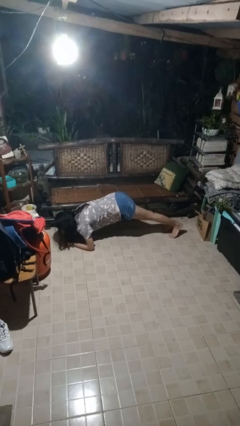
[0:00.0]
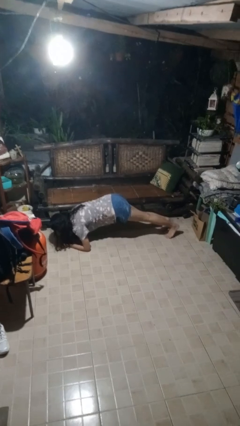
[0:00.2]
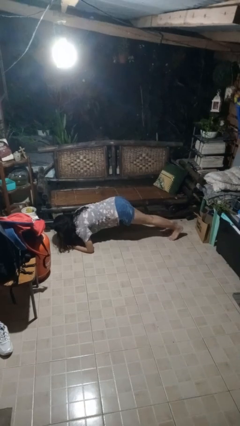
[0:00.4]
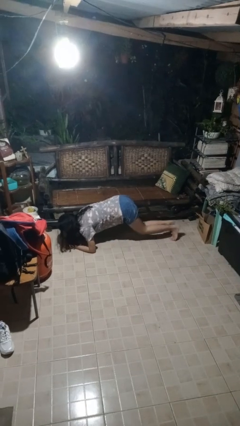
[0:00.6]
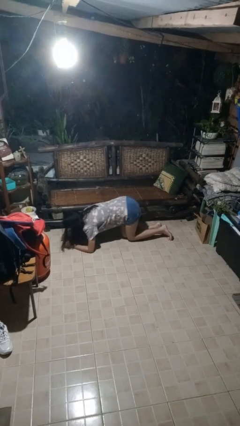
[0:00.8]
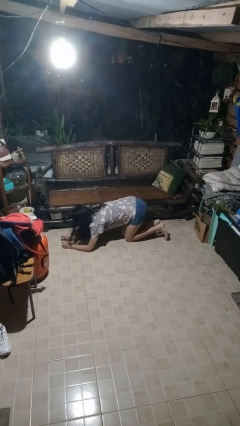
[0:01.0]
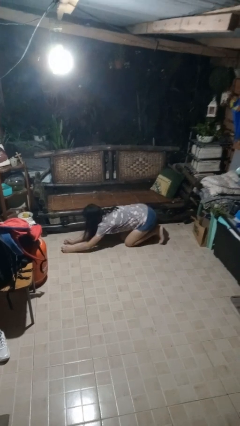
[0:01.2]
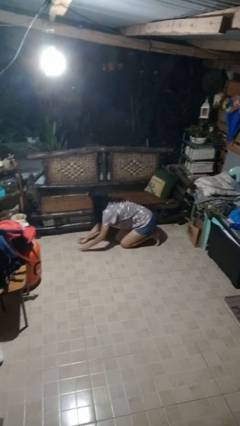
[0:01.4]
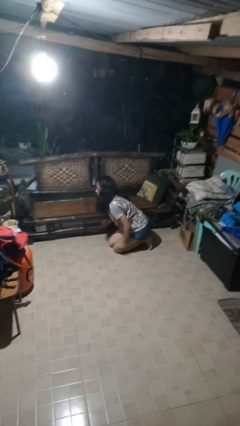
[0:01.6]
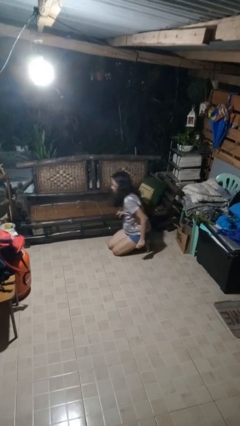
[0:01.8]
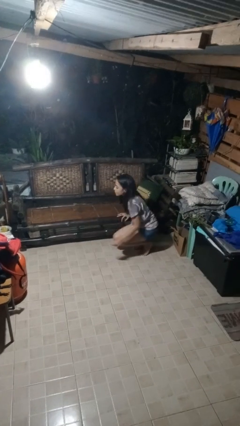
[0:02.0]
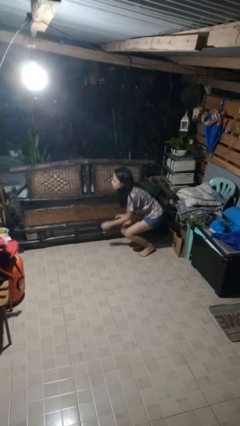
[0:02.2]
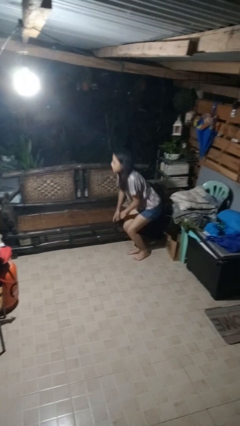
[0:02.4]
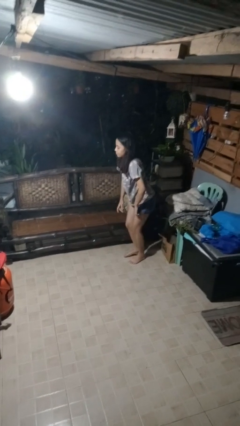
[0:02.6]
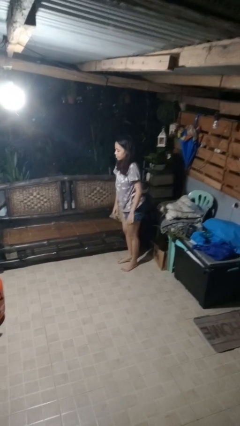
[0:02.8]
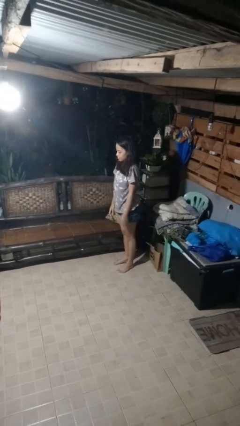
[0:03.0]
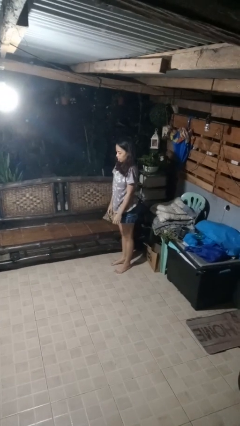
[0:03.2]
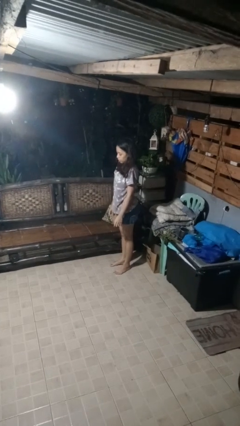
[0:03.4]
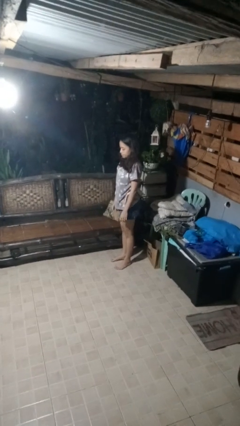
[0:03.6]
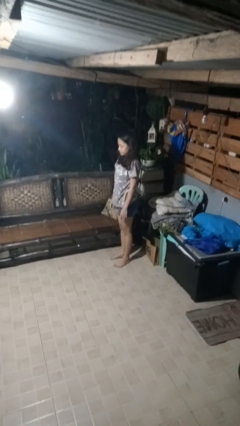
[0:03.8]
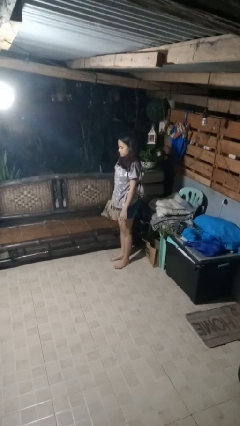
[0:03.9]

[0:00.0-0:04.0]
person stands up from floor

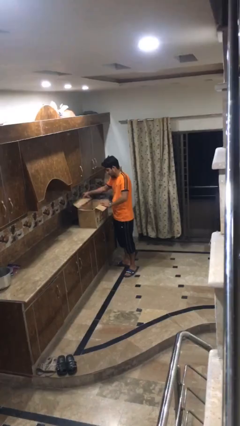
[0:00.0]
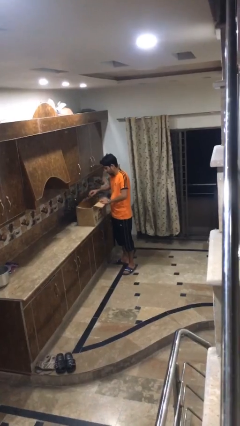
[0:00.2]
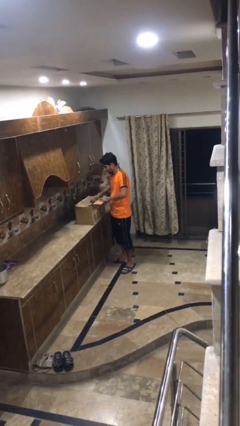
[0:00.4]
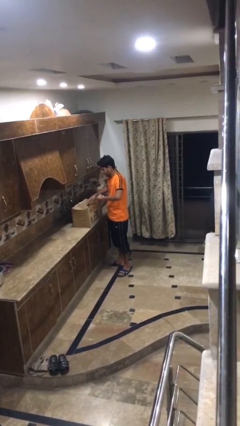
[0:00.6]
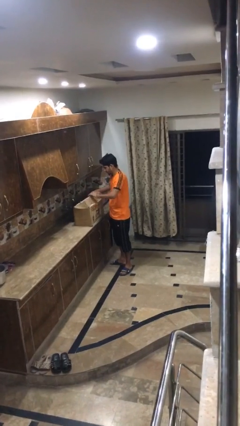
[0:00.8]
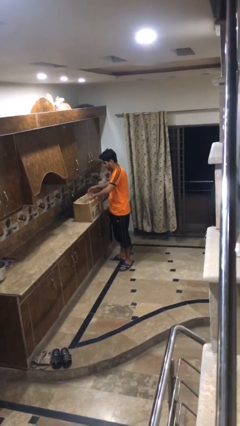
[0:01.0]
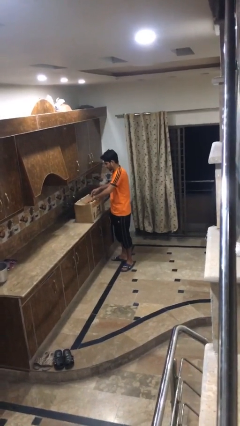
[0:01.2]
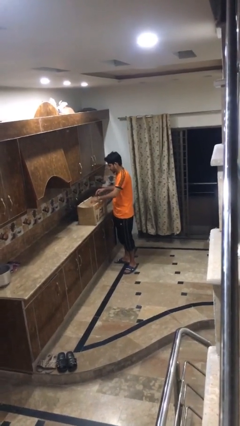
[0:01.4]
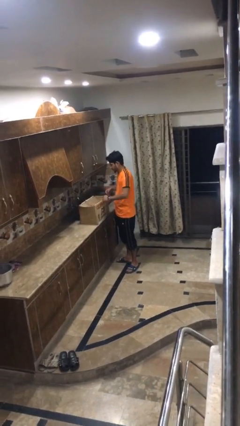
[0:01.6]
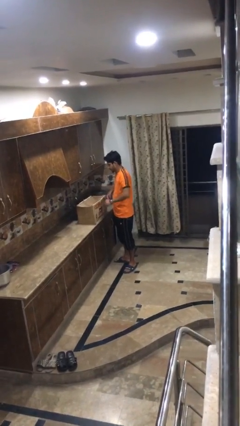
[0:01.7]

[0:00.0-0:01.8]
person closes box

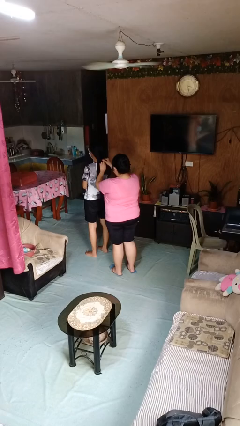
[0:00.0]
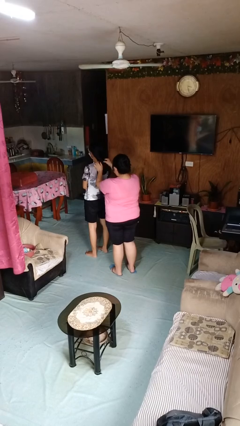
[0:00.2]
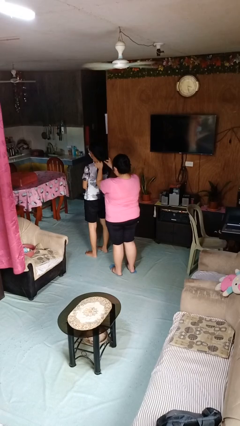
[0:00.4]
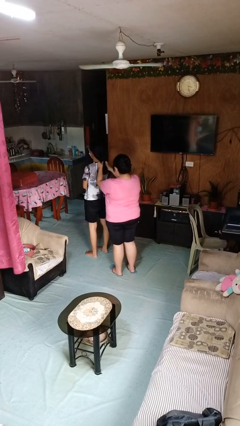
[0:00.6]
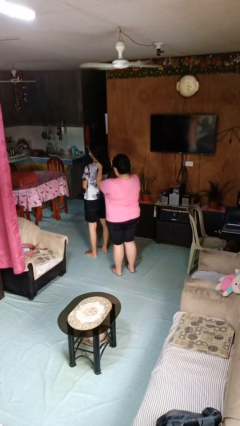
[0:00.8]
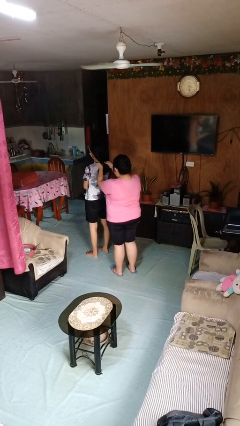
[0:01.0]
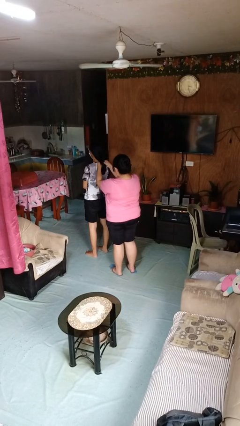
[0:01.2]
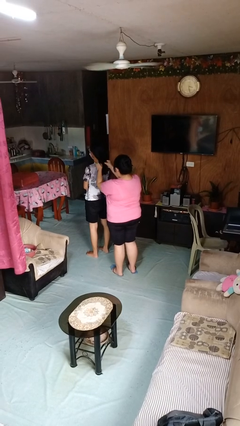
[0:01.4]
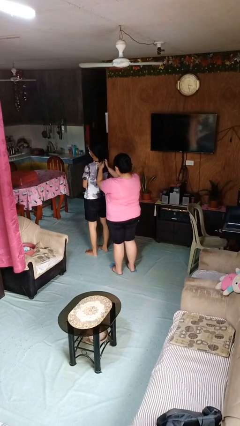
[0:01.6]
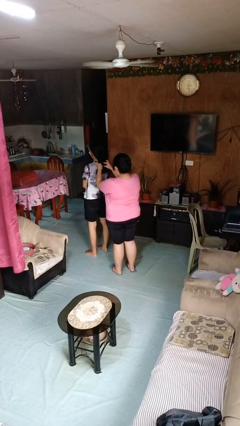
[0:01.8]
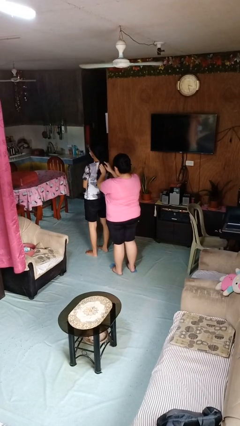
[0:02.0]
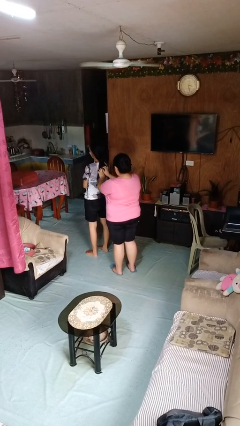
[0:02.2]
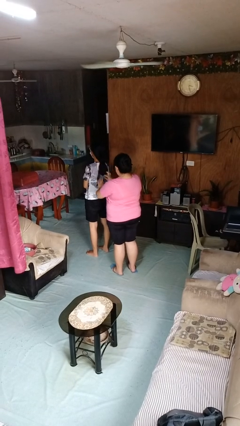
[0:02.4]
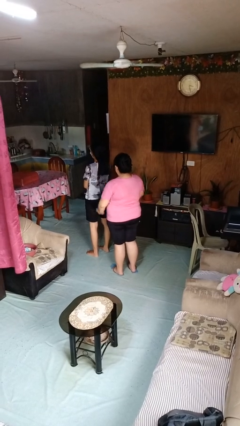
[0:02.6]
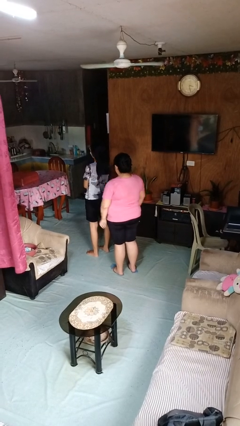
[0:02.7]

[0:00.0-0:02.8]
person braids hair of person

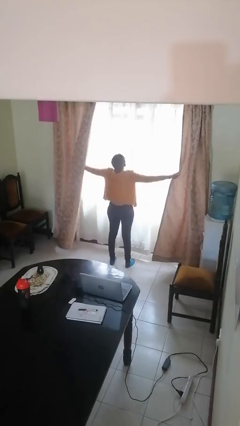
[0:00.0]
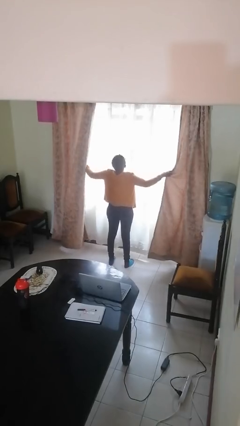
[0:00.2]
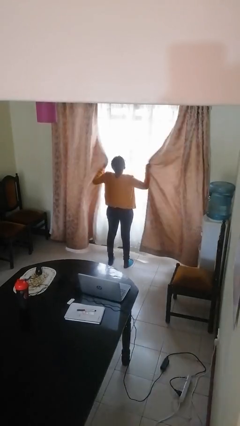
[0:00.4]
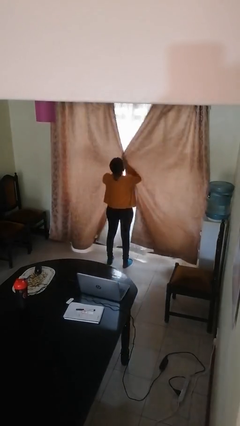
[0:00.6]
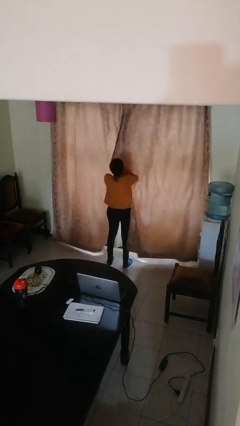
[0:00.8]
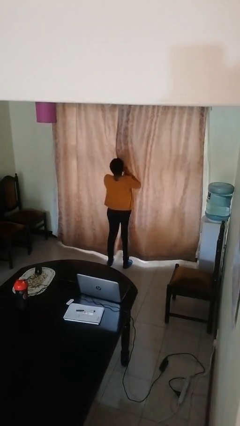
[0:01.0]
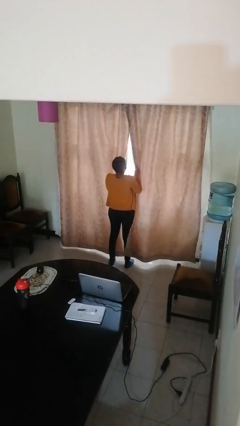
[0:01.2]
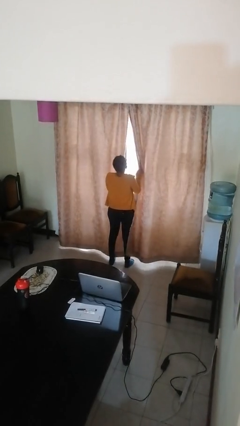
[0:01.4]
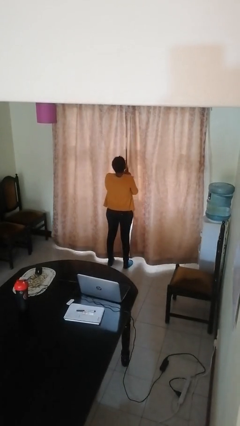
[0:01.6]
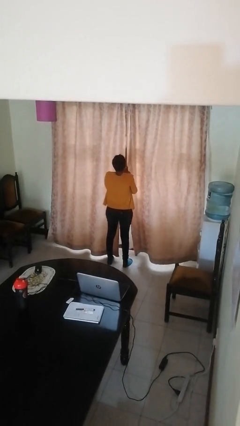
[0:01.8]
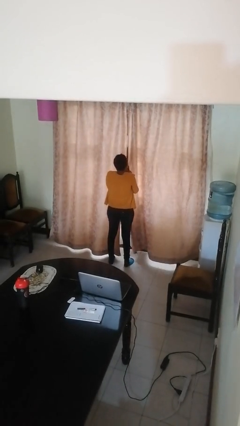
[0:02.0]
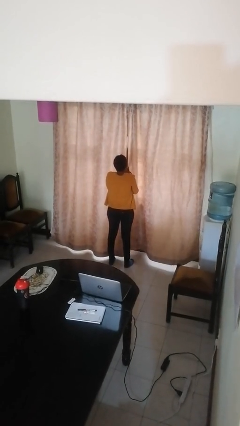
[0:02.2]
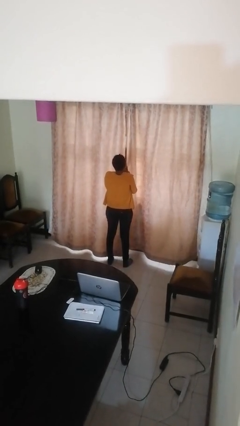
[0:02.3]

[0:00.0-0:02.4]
person closes curtains

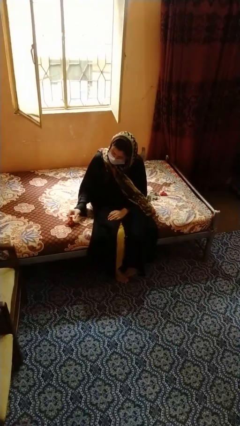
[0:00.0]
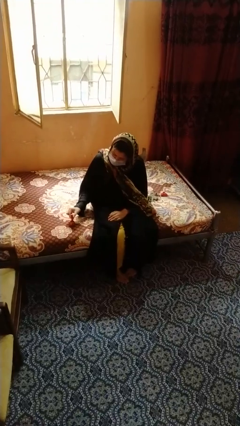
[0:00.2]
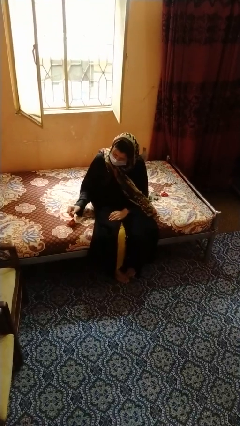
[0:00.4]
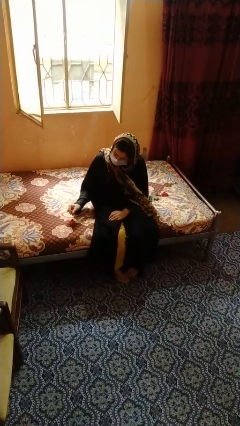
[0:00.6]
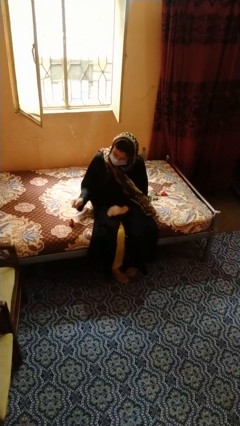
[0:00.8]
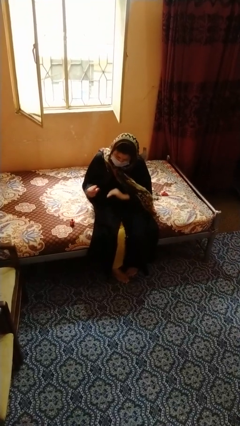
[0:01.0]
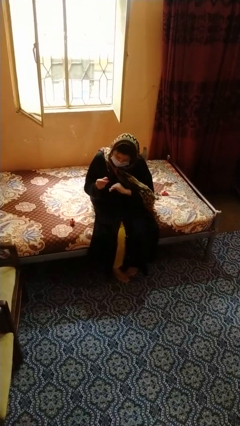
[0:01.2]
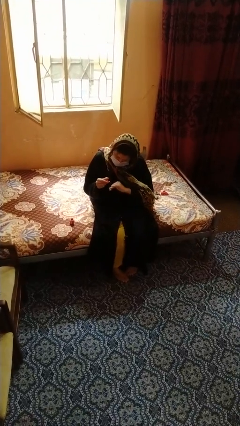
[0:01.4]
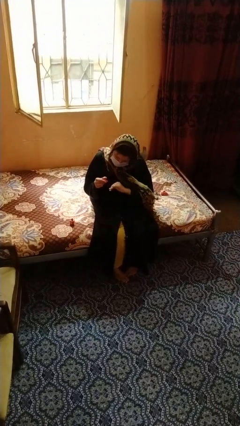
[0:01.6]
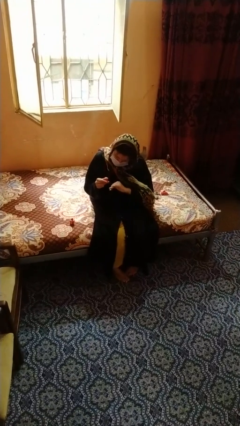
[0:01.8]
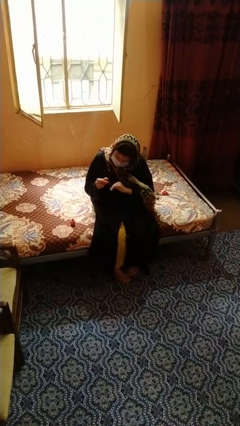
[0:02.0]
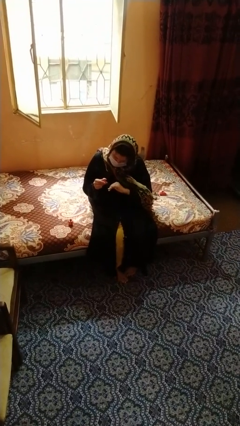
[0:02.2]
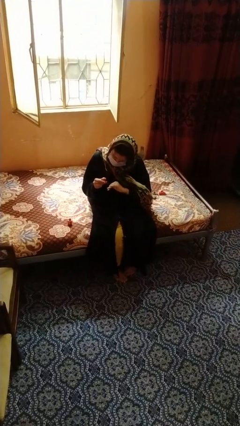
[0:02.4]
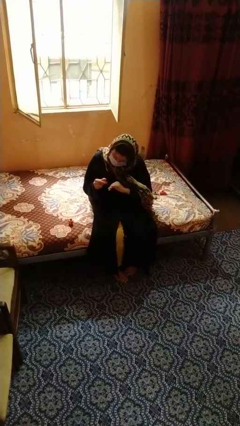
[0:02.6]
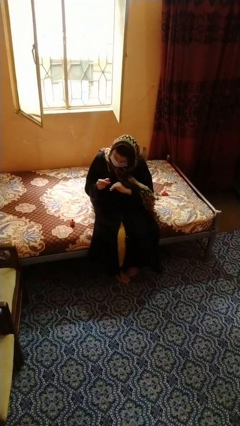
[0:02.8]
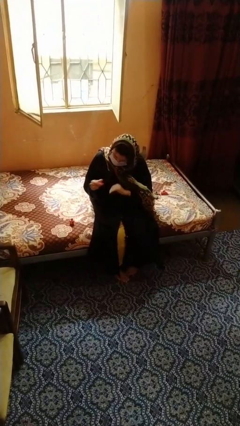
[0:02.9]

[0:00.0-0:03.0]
person paints fingernails

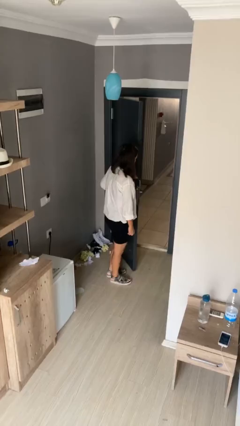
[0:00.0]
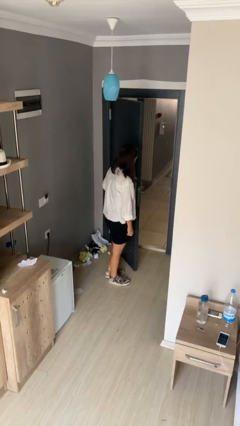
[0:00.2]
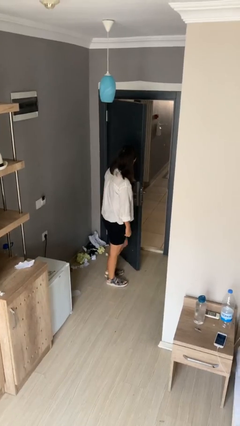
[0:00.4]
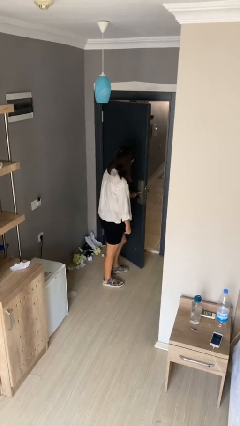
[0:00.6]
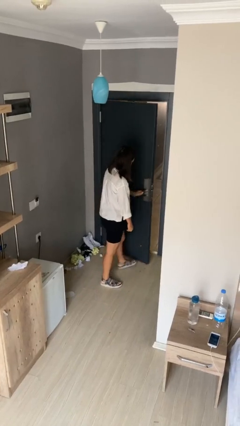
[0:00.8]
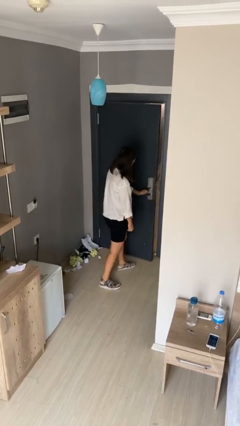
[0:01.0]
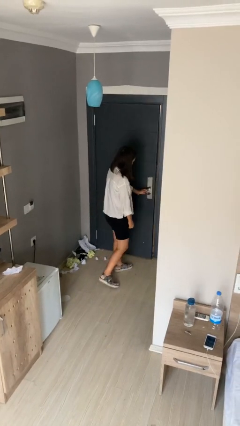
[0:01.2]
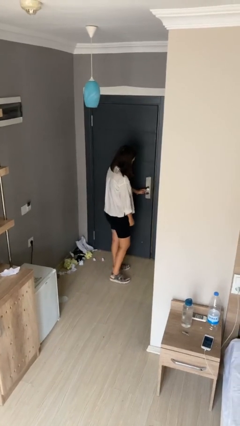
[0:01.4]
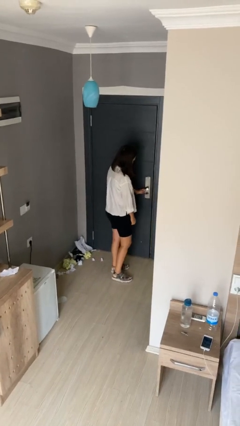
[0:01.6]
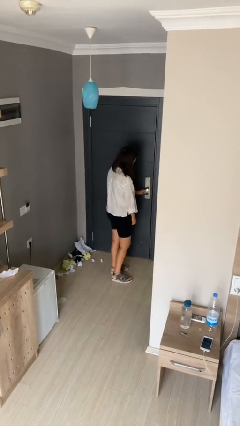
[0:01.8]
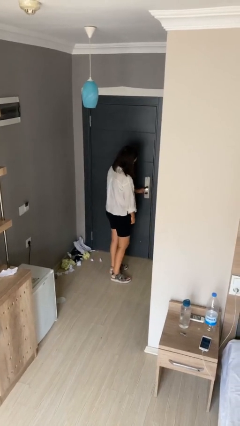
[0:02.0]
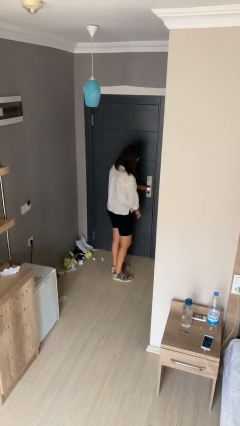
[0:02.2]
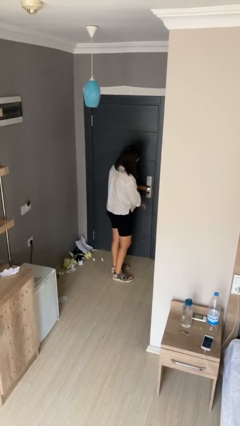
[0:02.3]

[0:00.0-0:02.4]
person closes facility door

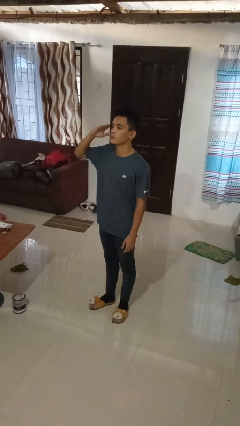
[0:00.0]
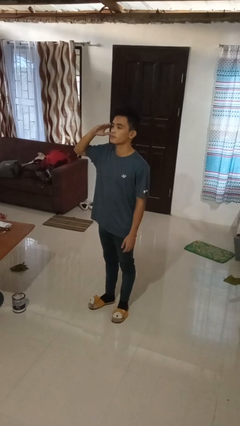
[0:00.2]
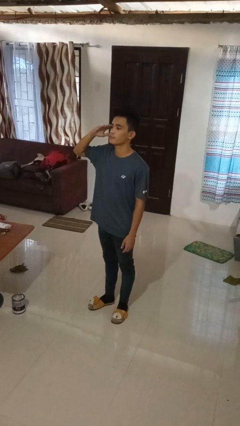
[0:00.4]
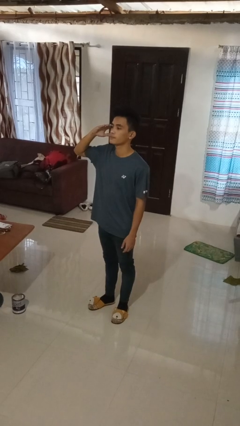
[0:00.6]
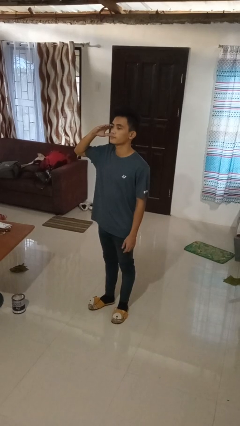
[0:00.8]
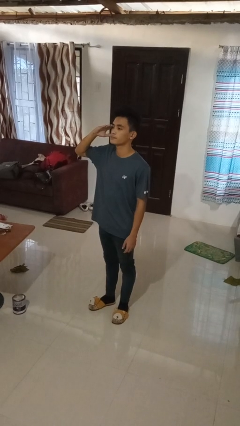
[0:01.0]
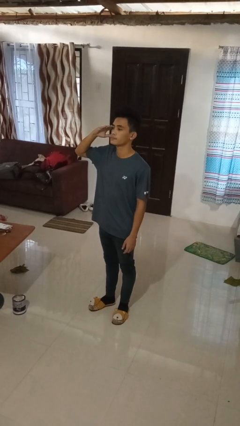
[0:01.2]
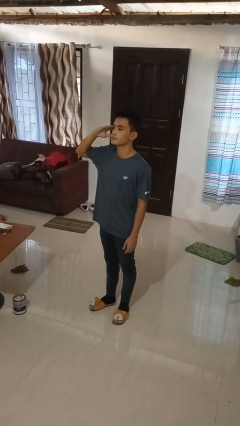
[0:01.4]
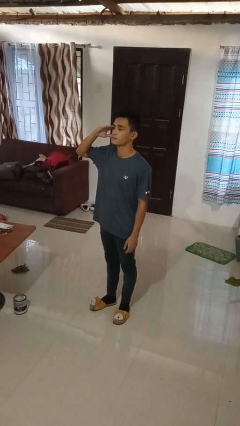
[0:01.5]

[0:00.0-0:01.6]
person salutes
